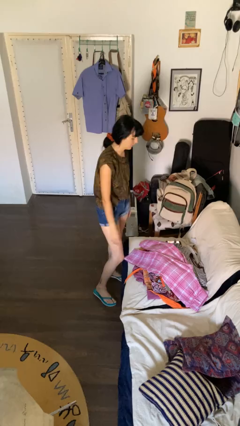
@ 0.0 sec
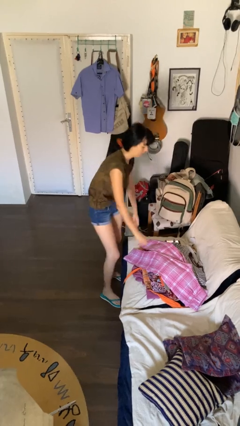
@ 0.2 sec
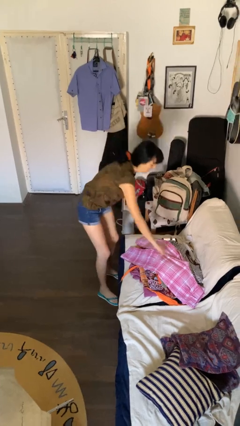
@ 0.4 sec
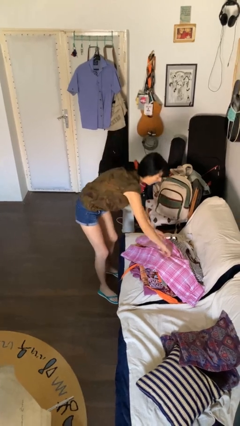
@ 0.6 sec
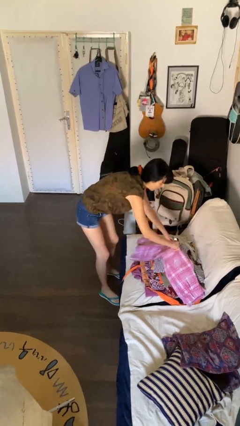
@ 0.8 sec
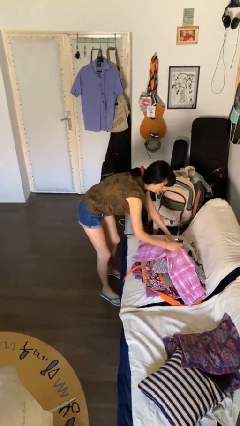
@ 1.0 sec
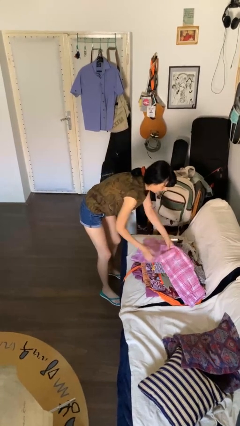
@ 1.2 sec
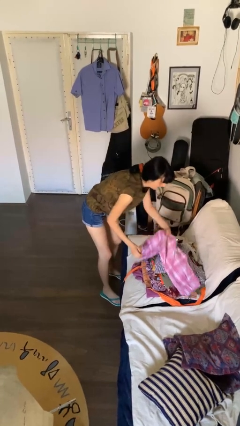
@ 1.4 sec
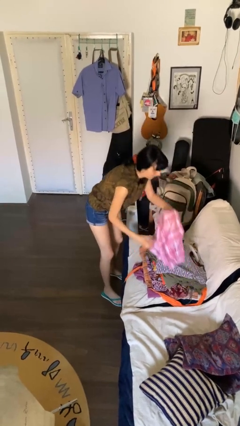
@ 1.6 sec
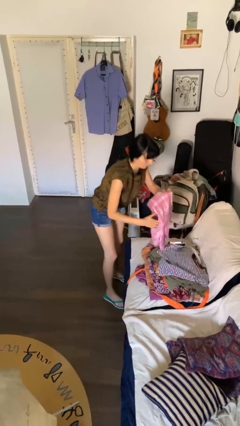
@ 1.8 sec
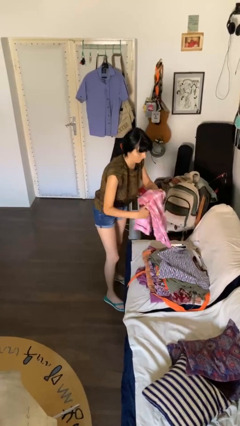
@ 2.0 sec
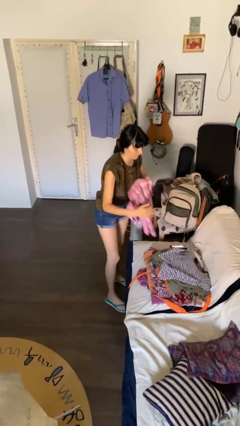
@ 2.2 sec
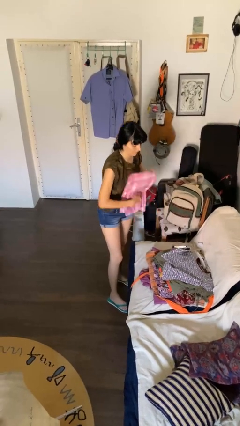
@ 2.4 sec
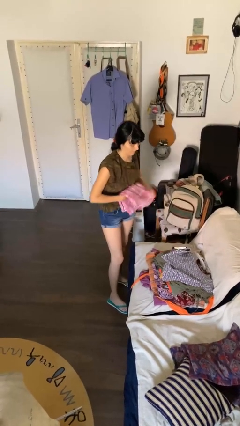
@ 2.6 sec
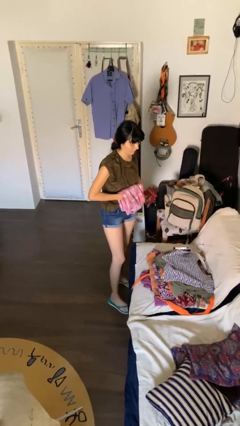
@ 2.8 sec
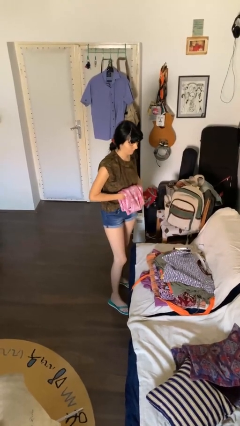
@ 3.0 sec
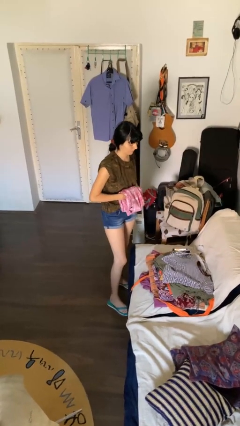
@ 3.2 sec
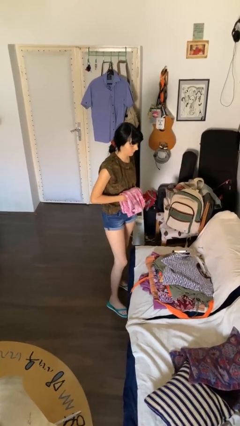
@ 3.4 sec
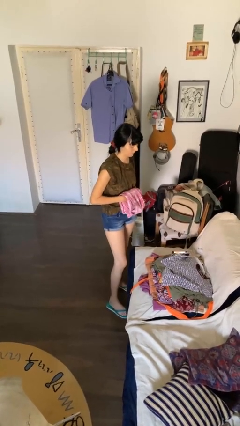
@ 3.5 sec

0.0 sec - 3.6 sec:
person folds pants

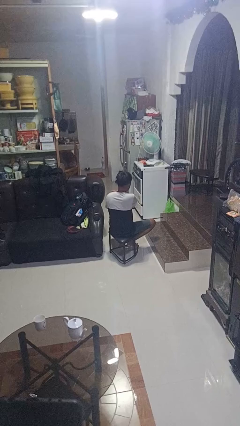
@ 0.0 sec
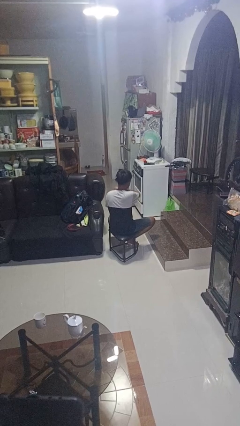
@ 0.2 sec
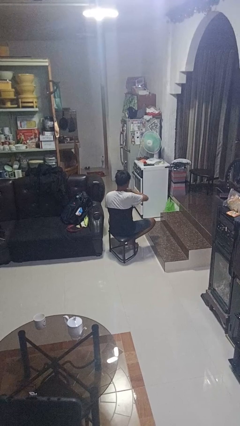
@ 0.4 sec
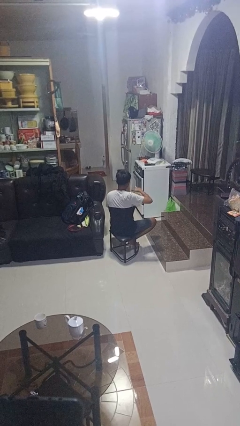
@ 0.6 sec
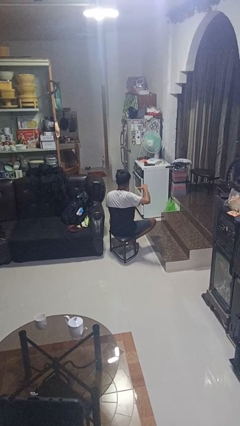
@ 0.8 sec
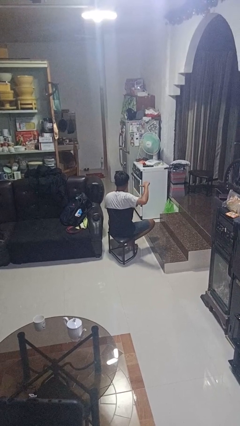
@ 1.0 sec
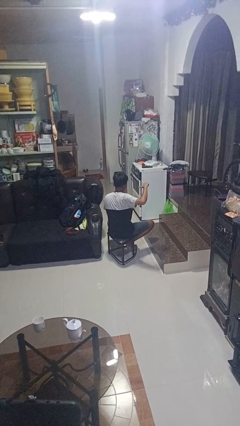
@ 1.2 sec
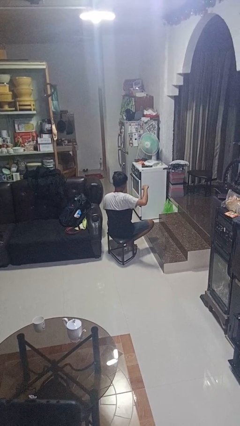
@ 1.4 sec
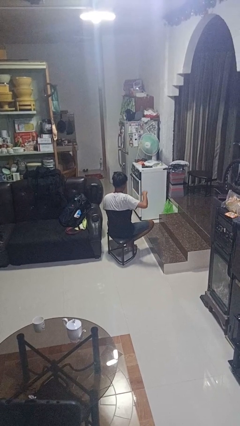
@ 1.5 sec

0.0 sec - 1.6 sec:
person gestures cut

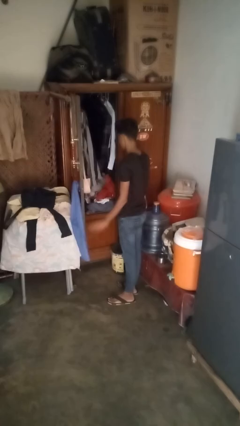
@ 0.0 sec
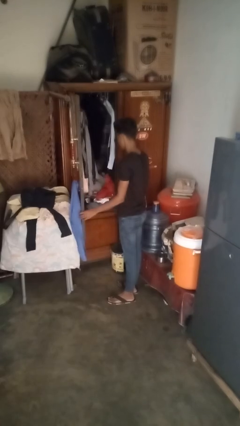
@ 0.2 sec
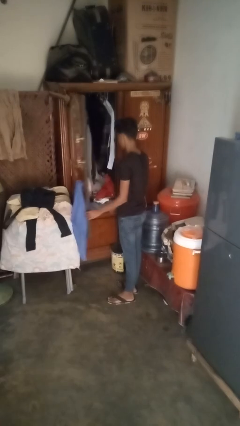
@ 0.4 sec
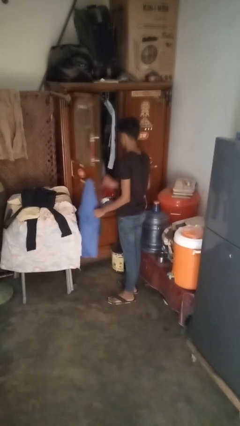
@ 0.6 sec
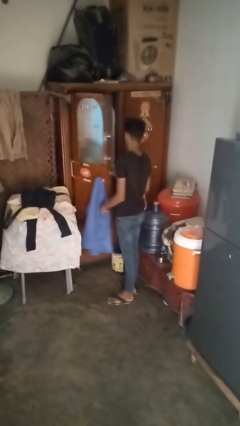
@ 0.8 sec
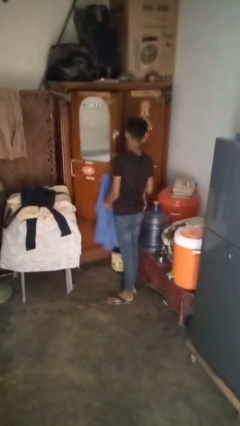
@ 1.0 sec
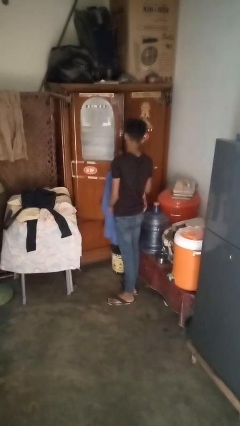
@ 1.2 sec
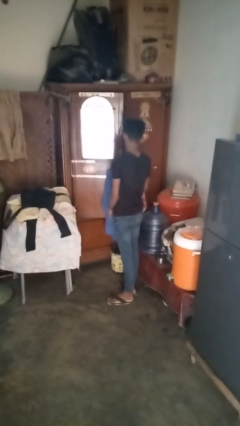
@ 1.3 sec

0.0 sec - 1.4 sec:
person closes dresser drawer

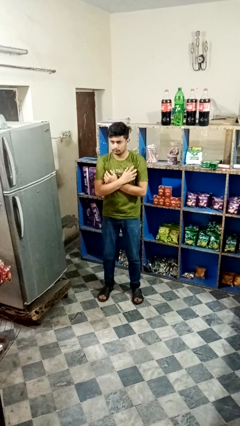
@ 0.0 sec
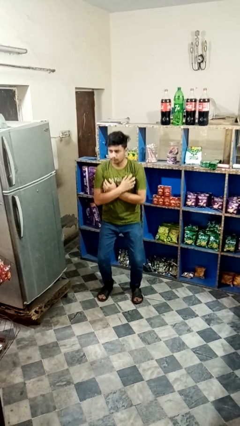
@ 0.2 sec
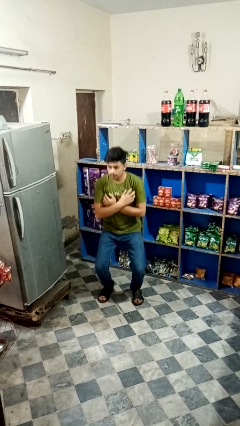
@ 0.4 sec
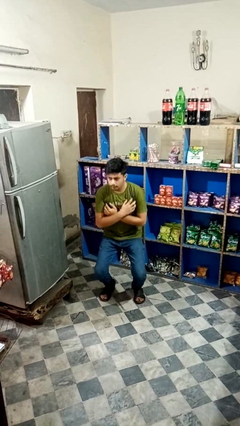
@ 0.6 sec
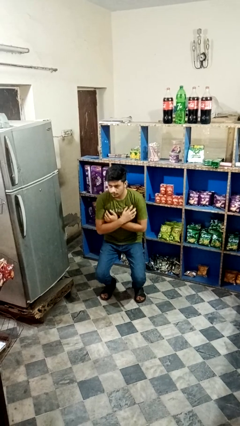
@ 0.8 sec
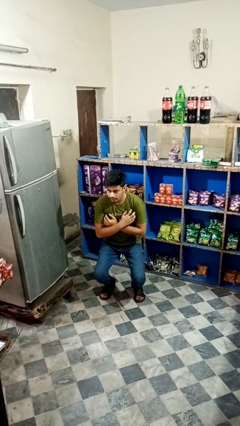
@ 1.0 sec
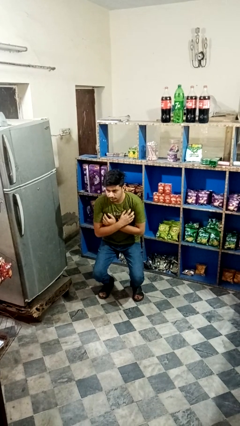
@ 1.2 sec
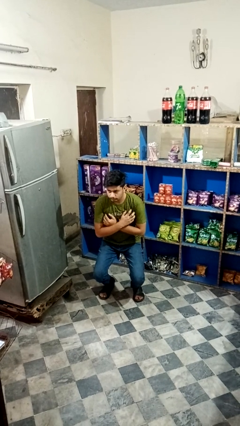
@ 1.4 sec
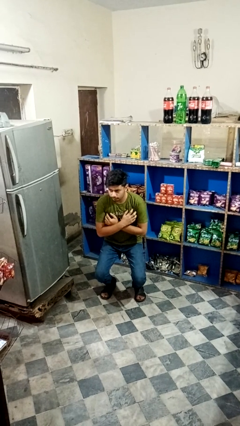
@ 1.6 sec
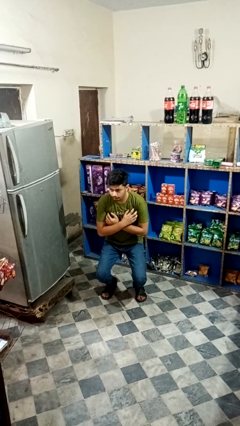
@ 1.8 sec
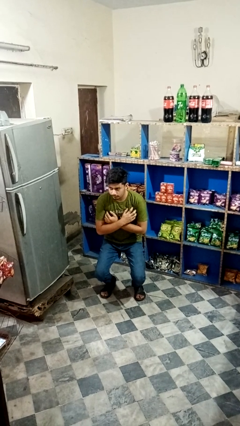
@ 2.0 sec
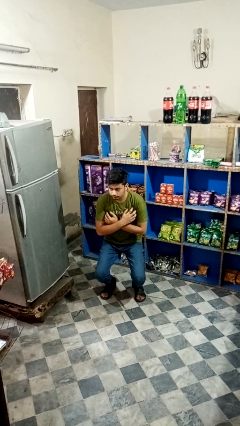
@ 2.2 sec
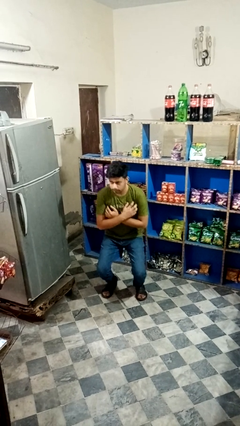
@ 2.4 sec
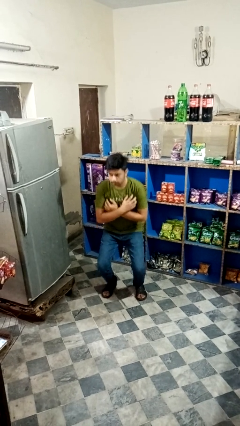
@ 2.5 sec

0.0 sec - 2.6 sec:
person squats

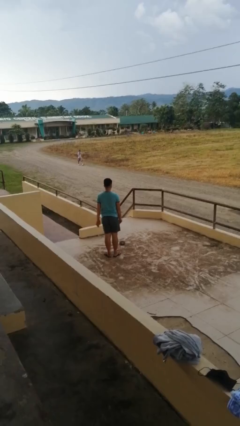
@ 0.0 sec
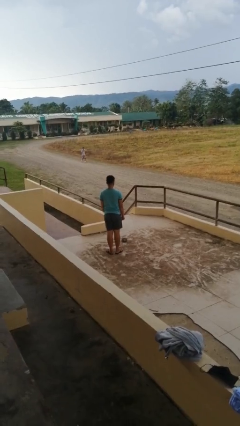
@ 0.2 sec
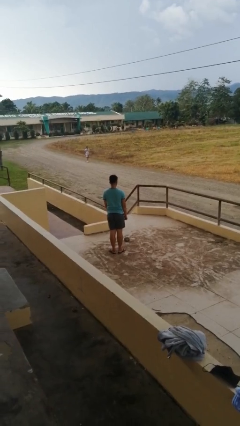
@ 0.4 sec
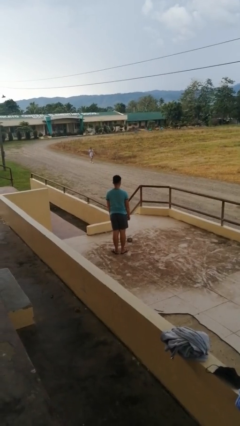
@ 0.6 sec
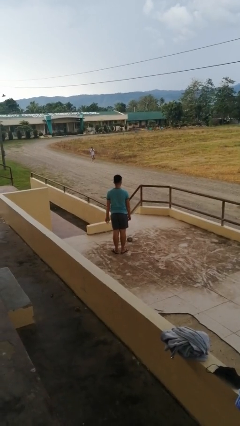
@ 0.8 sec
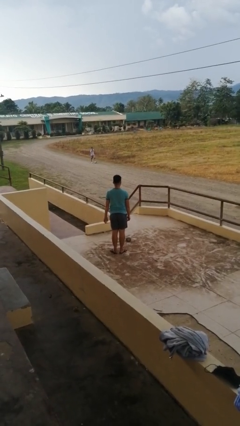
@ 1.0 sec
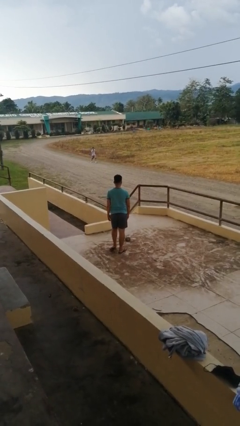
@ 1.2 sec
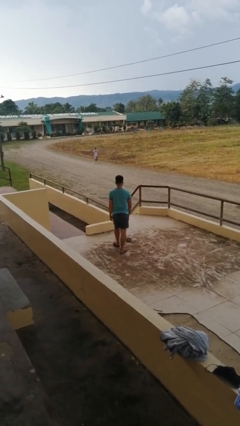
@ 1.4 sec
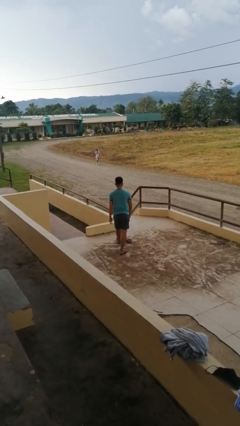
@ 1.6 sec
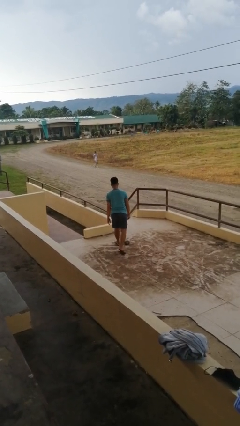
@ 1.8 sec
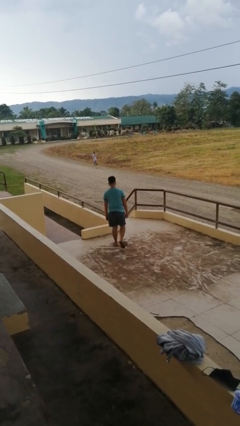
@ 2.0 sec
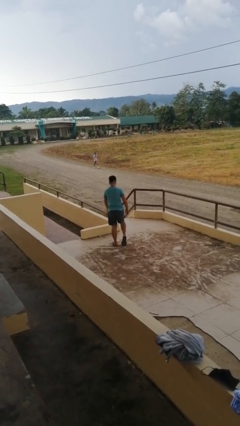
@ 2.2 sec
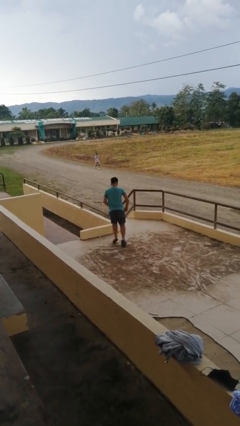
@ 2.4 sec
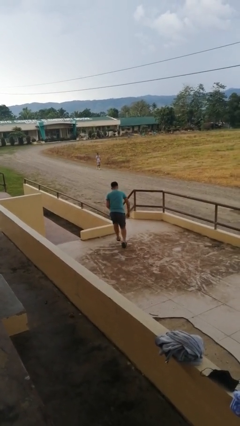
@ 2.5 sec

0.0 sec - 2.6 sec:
person trips on object on floor

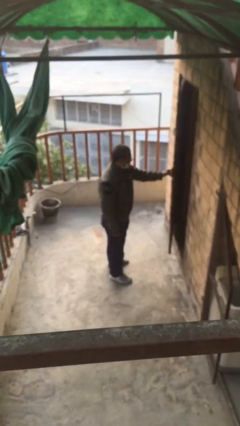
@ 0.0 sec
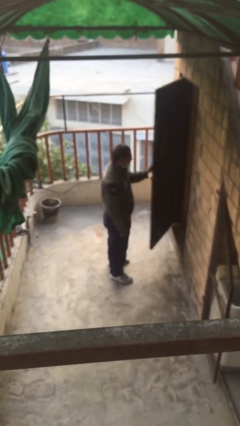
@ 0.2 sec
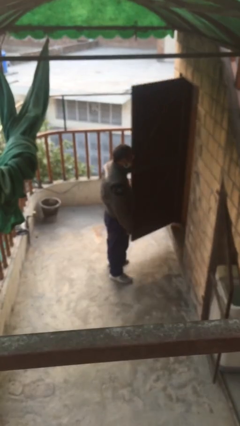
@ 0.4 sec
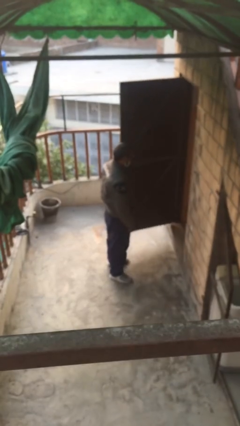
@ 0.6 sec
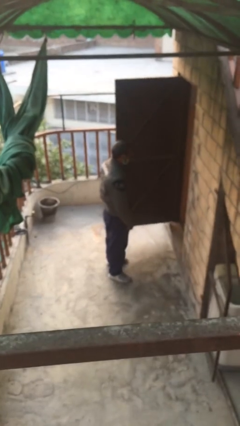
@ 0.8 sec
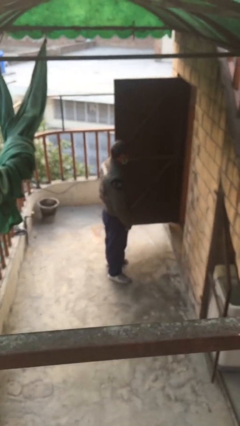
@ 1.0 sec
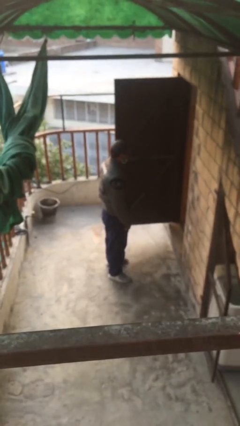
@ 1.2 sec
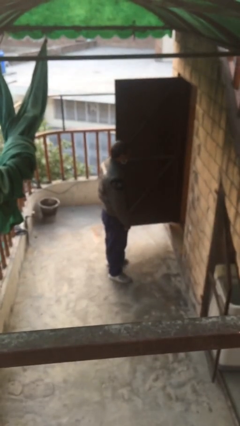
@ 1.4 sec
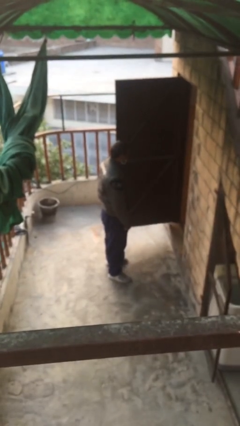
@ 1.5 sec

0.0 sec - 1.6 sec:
person opens facility door

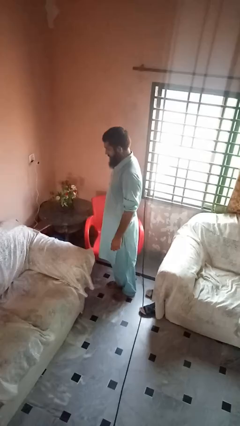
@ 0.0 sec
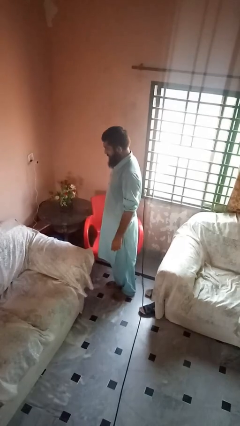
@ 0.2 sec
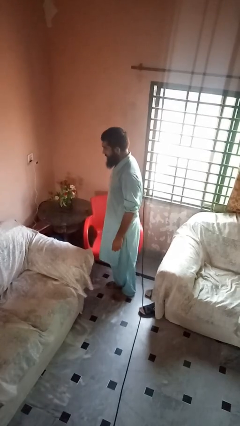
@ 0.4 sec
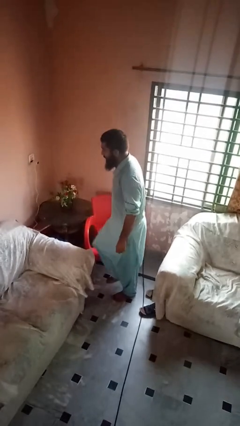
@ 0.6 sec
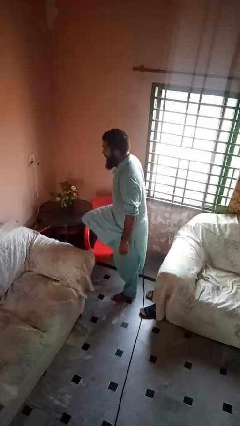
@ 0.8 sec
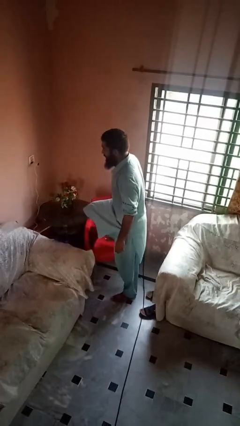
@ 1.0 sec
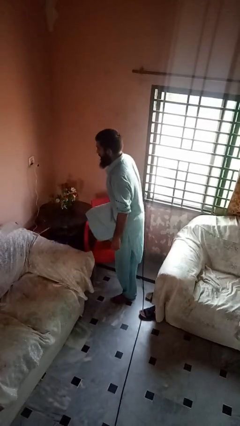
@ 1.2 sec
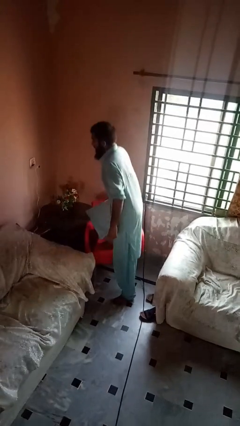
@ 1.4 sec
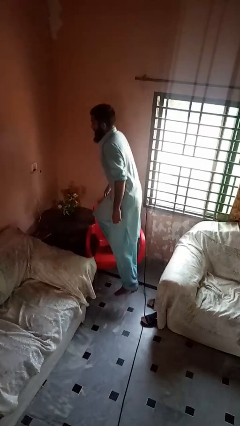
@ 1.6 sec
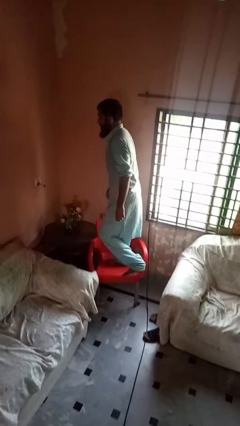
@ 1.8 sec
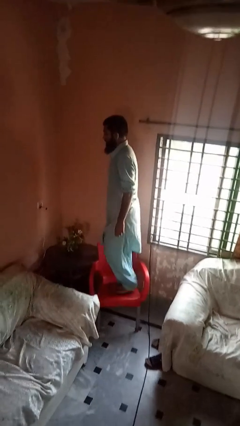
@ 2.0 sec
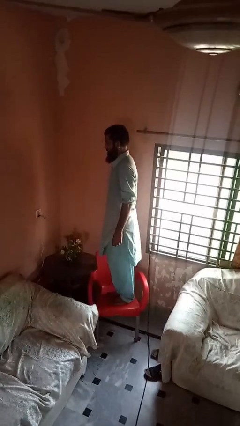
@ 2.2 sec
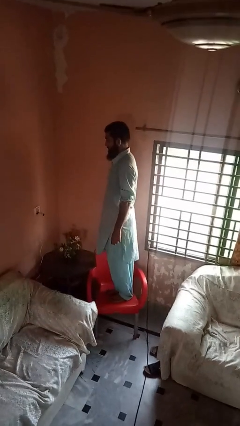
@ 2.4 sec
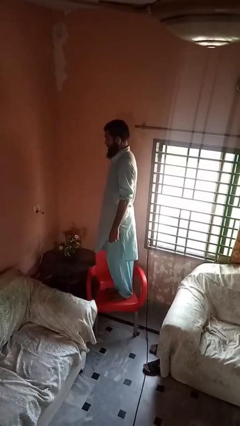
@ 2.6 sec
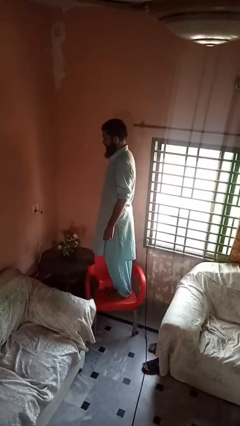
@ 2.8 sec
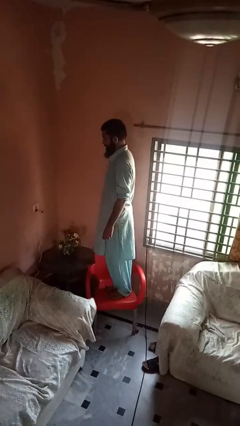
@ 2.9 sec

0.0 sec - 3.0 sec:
person climbs on chair

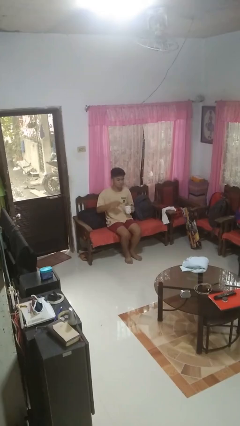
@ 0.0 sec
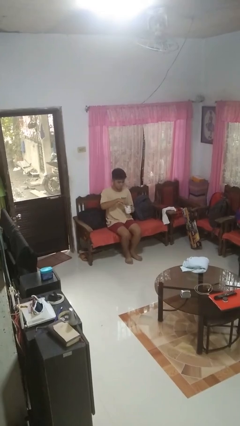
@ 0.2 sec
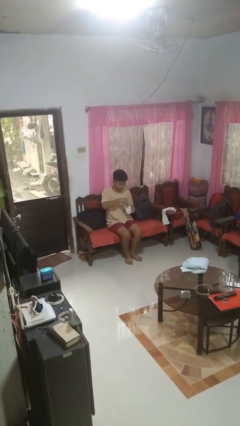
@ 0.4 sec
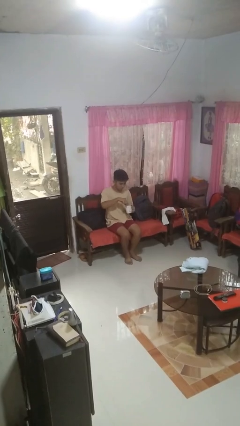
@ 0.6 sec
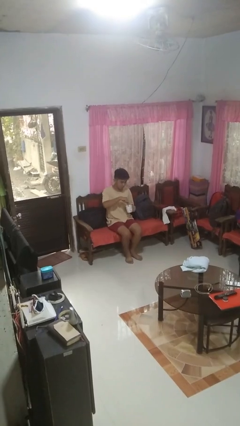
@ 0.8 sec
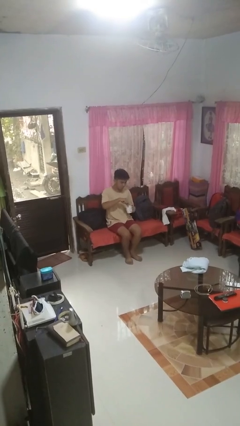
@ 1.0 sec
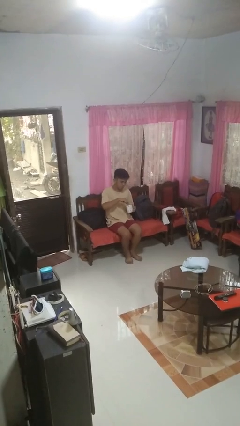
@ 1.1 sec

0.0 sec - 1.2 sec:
person stirs mug
